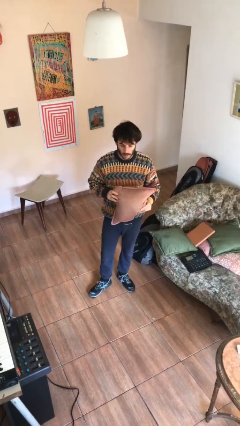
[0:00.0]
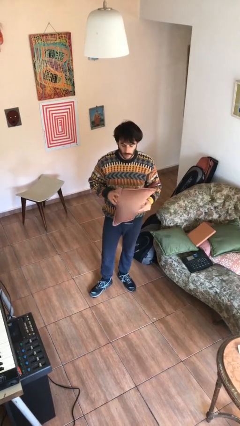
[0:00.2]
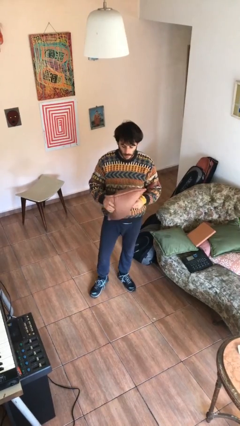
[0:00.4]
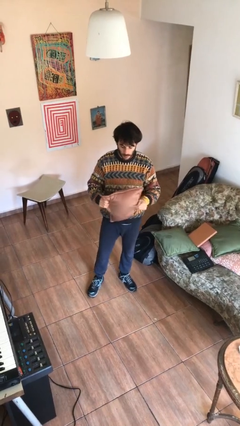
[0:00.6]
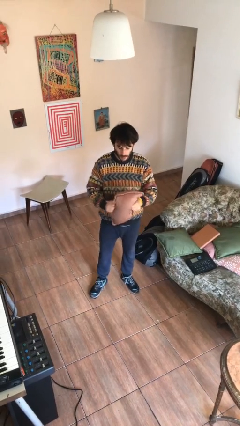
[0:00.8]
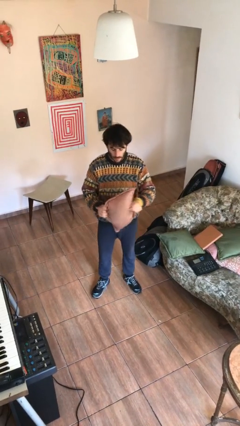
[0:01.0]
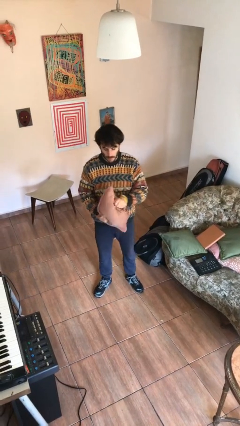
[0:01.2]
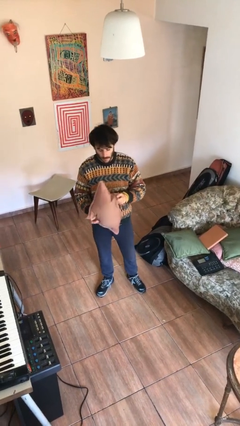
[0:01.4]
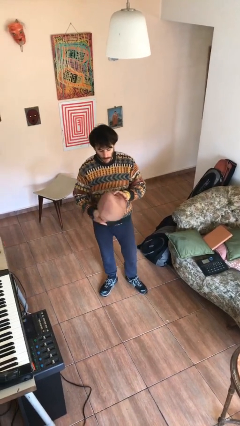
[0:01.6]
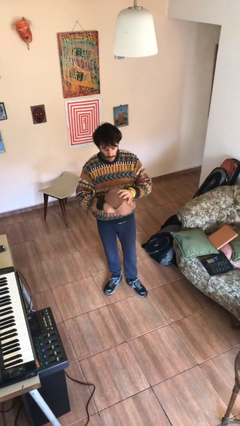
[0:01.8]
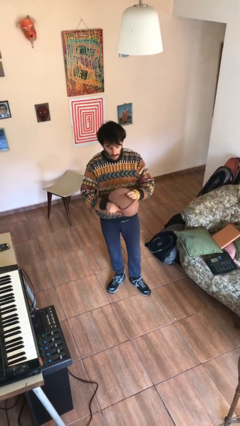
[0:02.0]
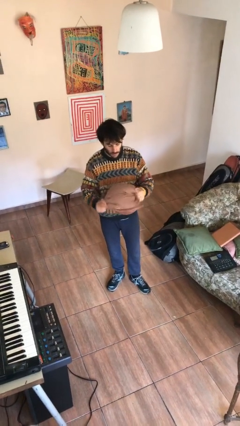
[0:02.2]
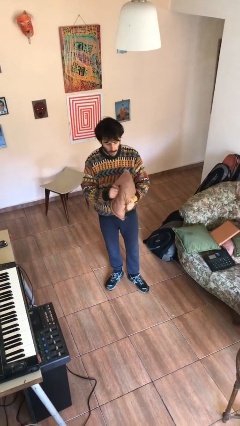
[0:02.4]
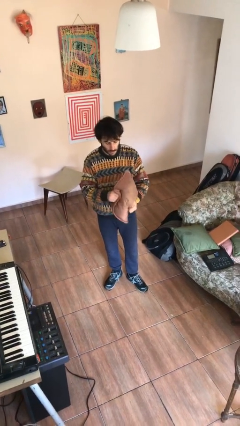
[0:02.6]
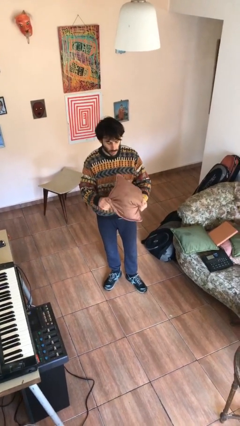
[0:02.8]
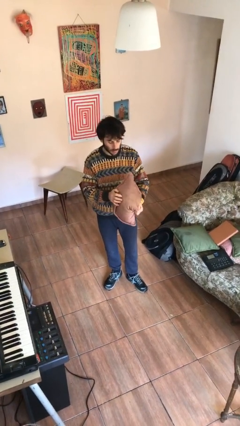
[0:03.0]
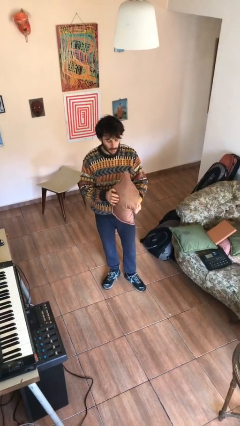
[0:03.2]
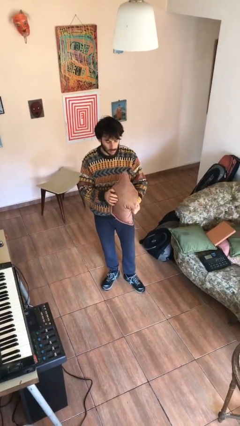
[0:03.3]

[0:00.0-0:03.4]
person squeezes object

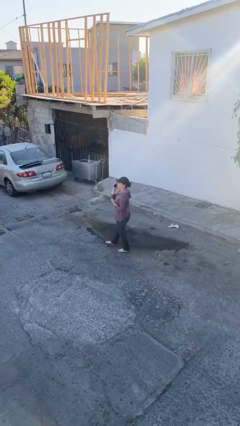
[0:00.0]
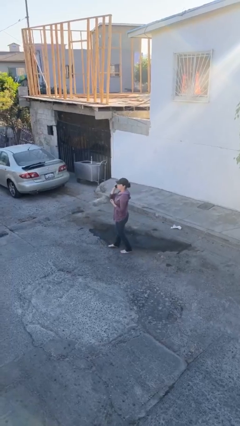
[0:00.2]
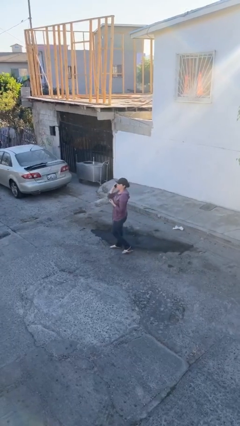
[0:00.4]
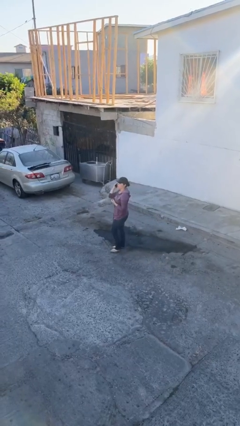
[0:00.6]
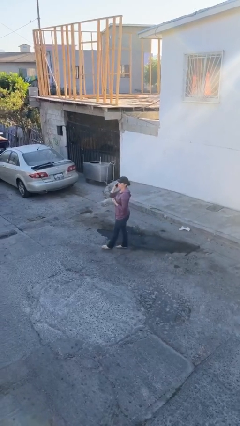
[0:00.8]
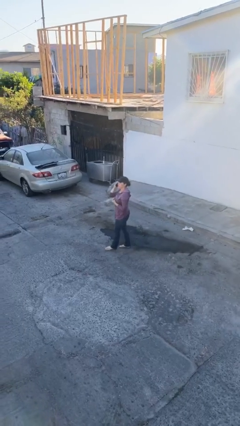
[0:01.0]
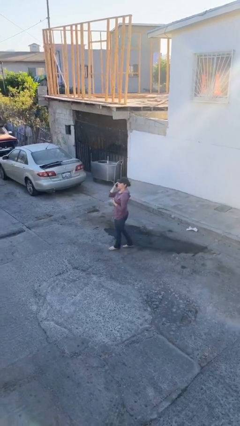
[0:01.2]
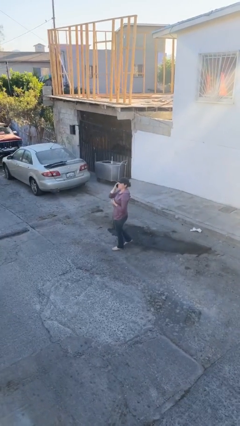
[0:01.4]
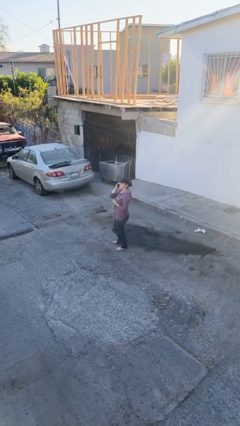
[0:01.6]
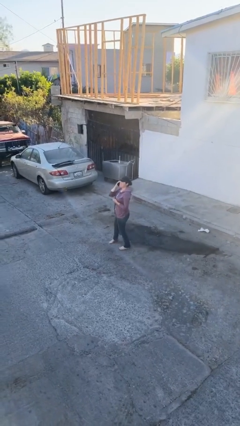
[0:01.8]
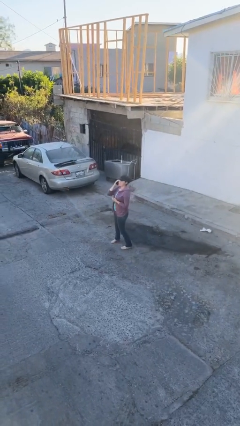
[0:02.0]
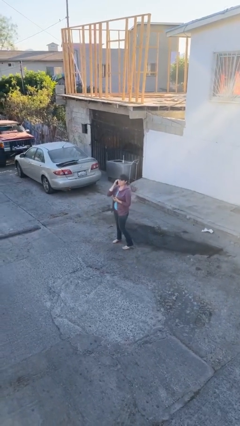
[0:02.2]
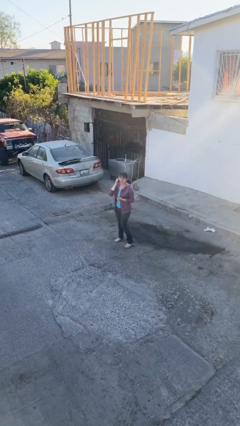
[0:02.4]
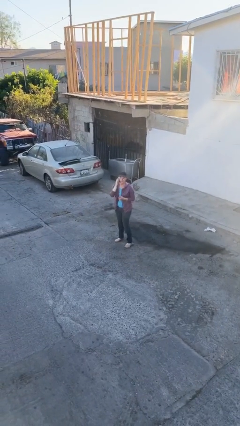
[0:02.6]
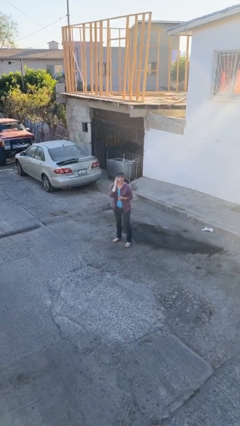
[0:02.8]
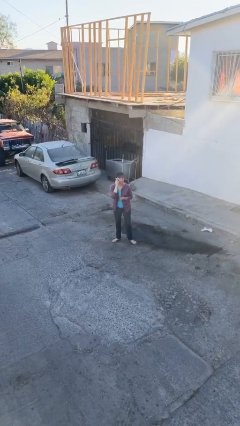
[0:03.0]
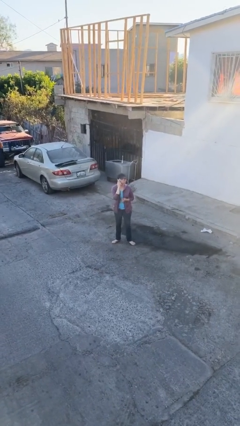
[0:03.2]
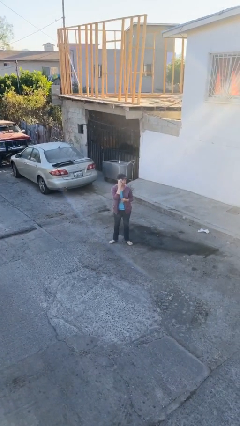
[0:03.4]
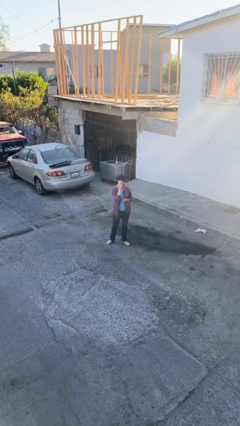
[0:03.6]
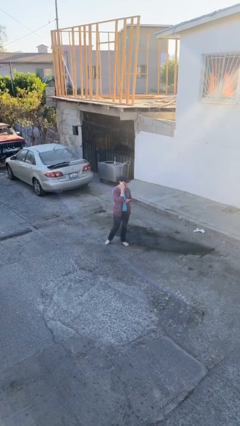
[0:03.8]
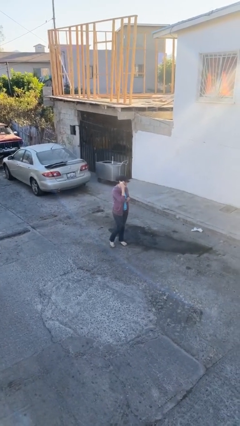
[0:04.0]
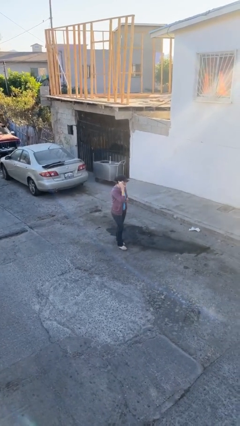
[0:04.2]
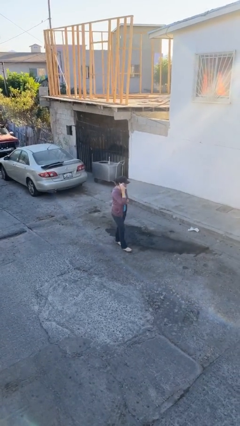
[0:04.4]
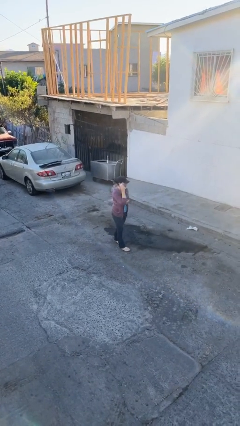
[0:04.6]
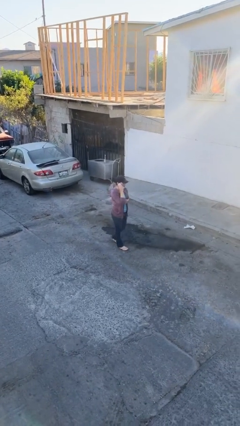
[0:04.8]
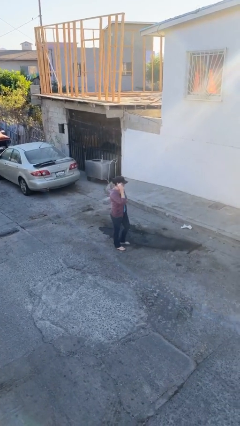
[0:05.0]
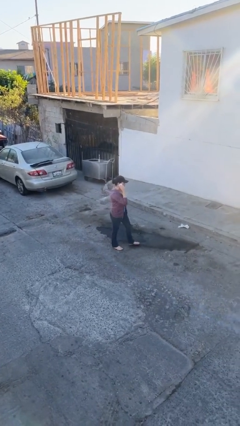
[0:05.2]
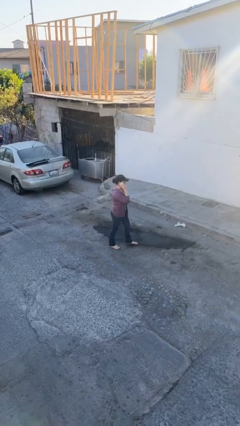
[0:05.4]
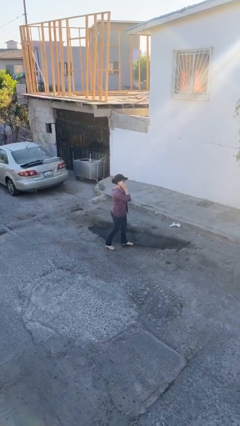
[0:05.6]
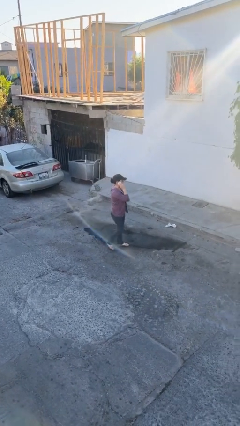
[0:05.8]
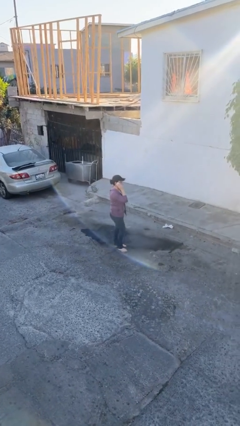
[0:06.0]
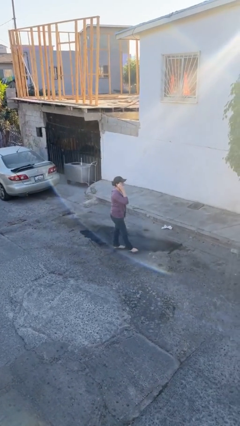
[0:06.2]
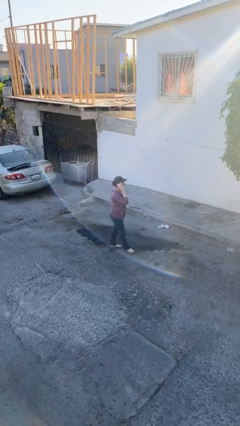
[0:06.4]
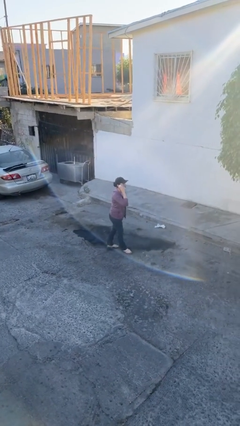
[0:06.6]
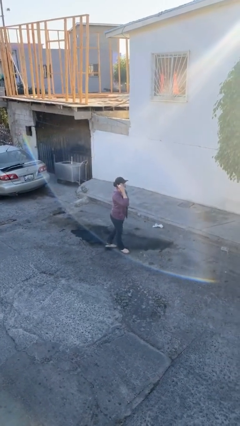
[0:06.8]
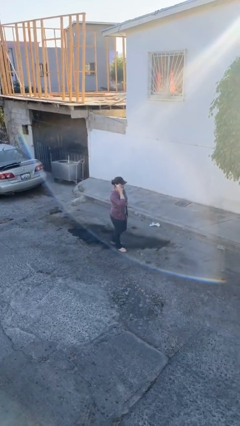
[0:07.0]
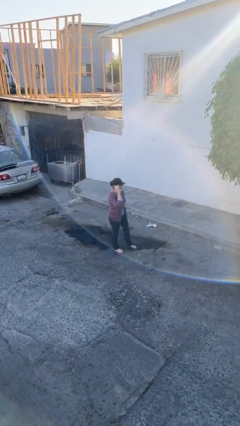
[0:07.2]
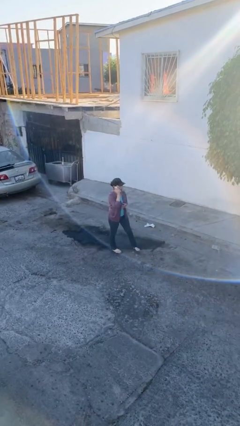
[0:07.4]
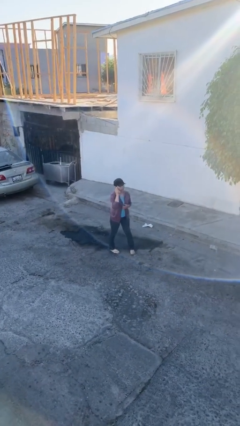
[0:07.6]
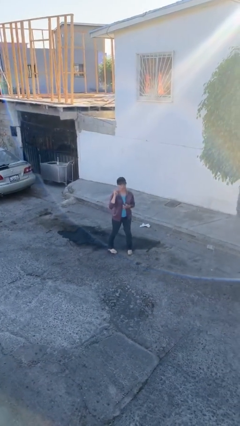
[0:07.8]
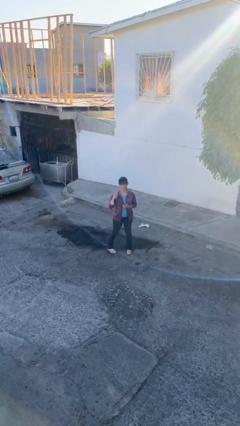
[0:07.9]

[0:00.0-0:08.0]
person talks on phone

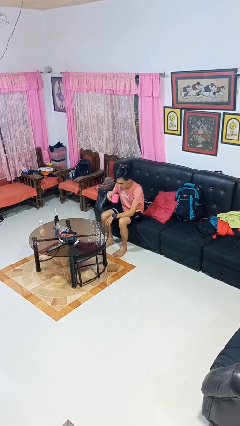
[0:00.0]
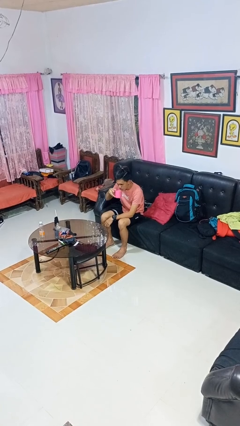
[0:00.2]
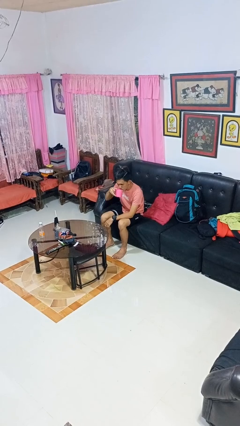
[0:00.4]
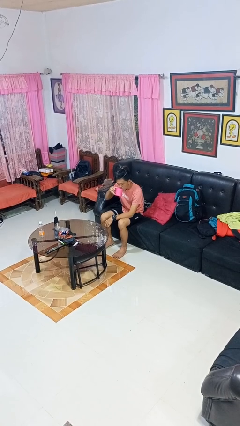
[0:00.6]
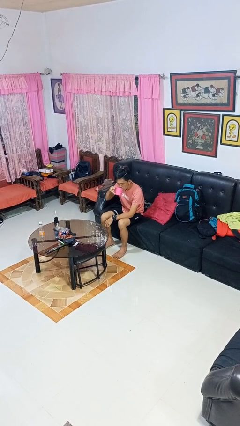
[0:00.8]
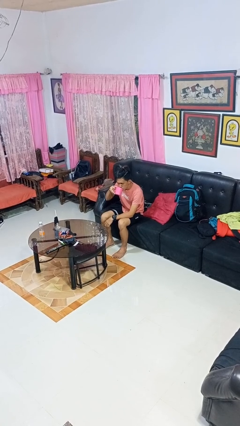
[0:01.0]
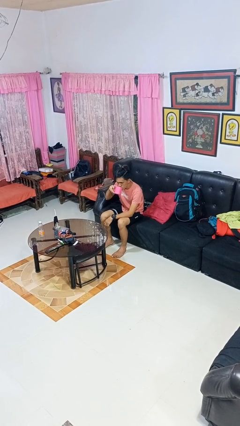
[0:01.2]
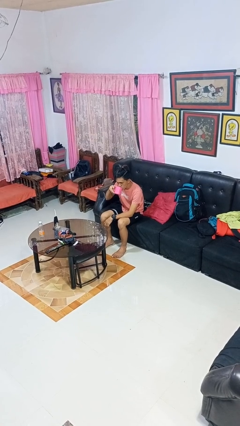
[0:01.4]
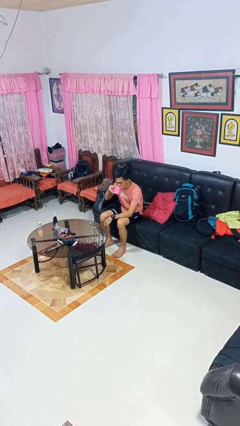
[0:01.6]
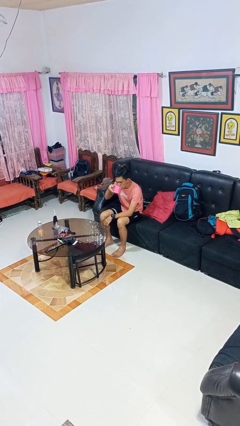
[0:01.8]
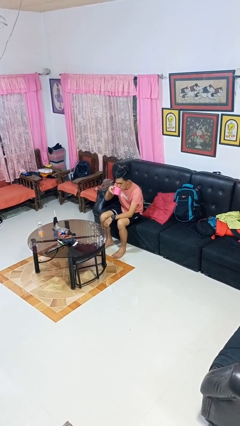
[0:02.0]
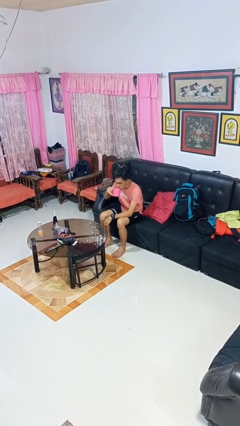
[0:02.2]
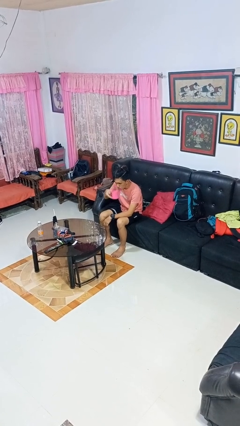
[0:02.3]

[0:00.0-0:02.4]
person drinks from mug

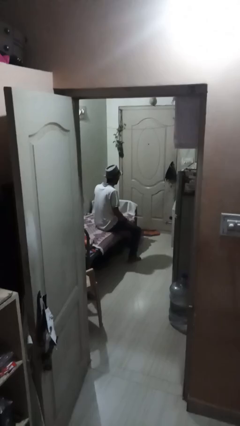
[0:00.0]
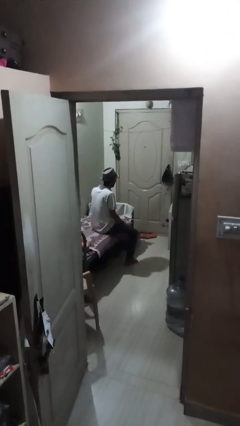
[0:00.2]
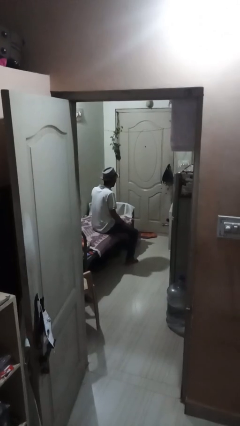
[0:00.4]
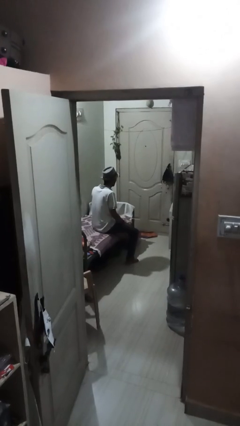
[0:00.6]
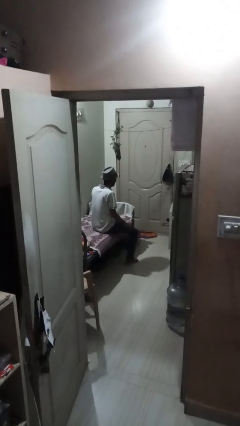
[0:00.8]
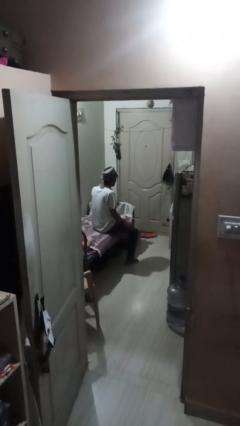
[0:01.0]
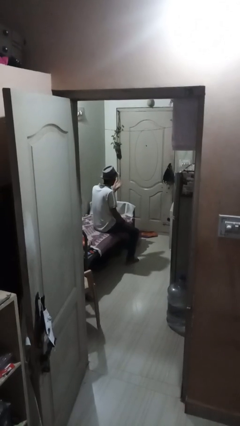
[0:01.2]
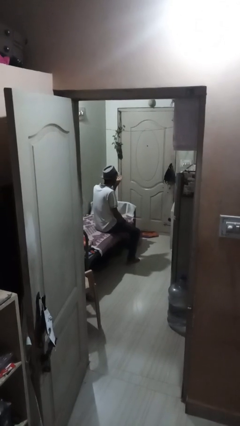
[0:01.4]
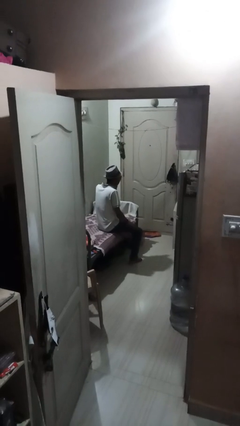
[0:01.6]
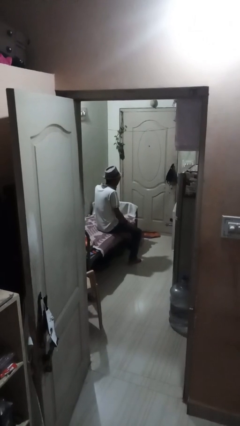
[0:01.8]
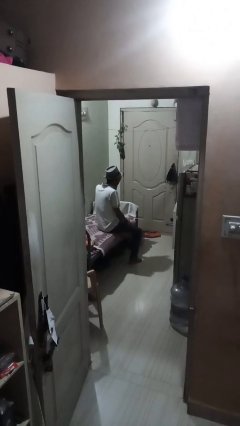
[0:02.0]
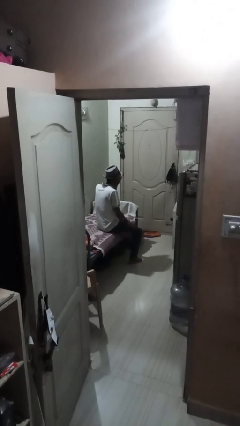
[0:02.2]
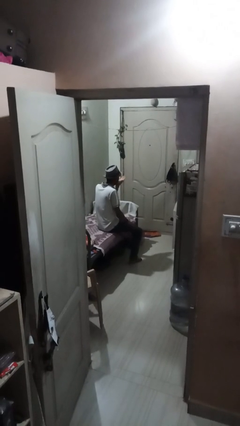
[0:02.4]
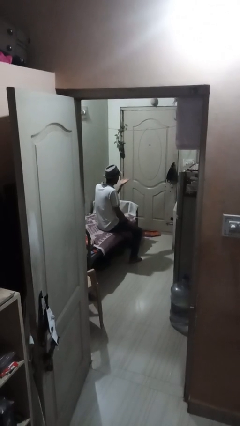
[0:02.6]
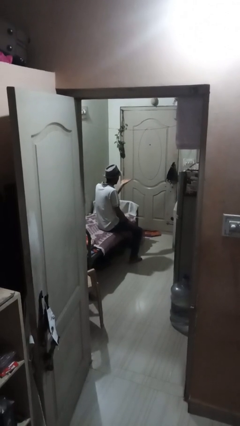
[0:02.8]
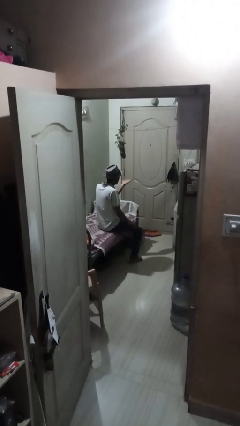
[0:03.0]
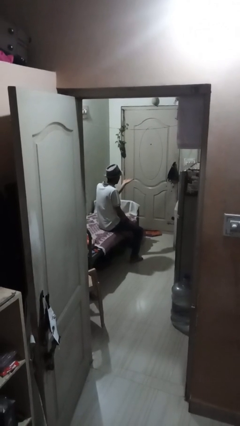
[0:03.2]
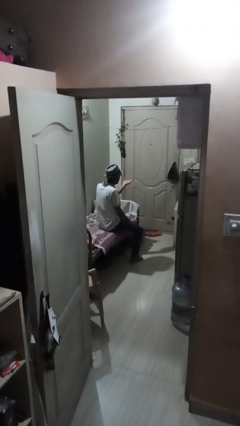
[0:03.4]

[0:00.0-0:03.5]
person gestures blow kiss

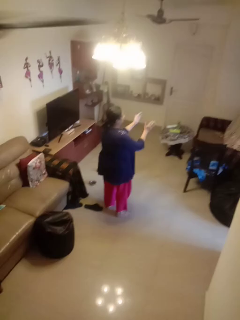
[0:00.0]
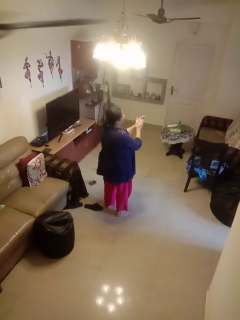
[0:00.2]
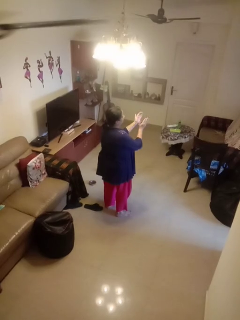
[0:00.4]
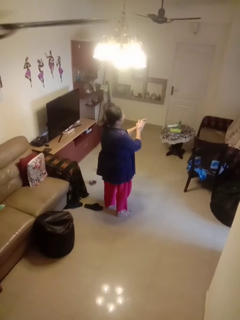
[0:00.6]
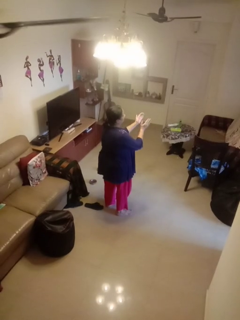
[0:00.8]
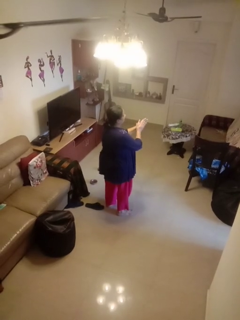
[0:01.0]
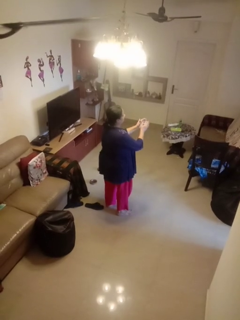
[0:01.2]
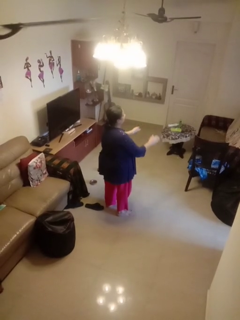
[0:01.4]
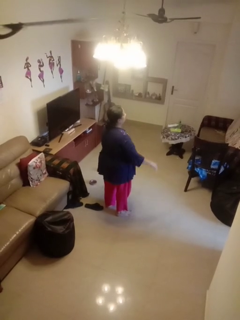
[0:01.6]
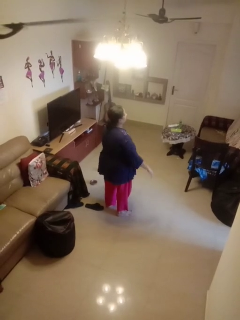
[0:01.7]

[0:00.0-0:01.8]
person claps hands
